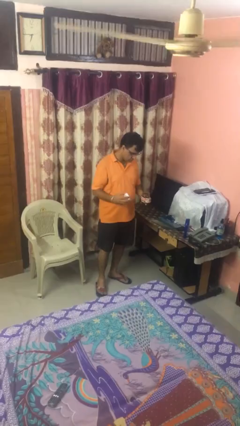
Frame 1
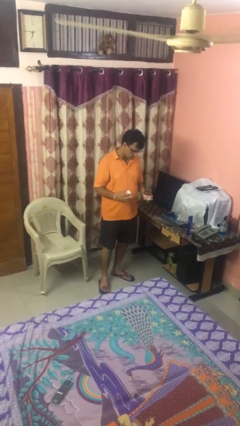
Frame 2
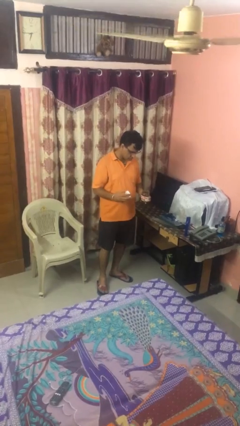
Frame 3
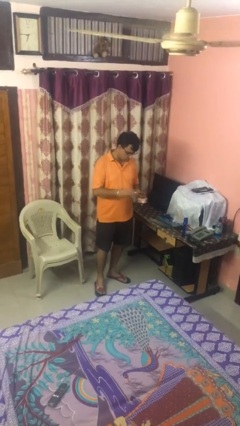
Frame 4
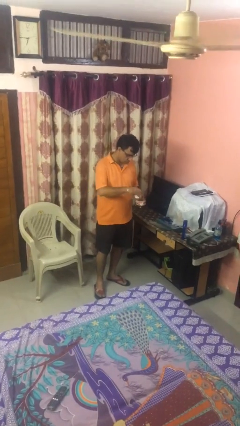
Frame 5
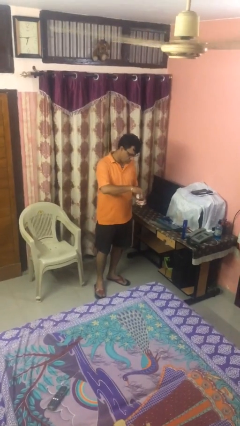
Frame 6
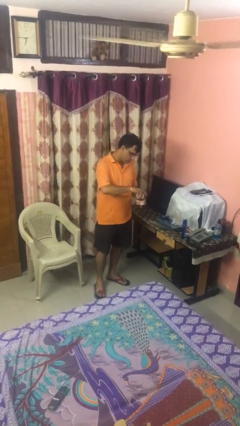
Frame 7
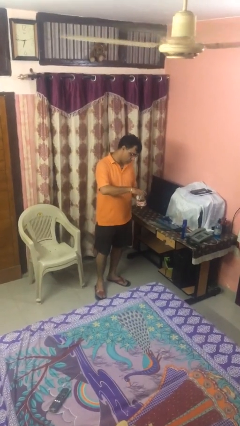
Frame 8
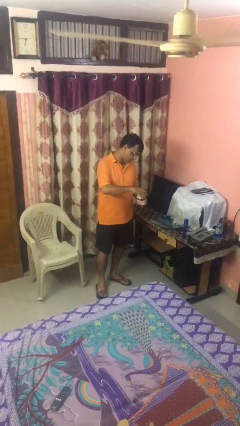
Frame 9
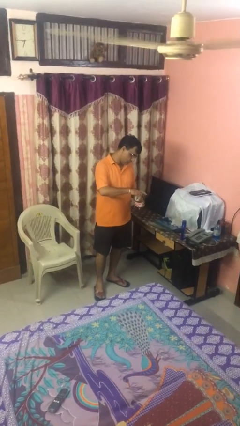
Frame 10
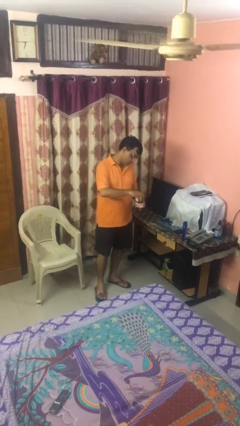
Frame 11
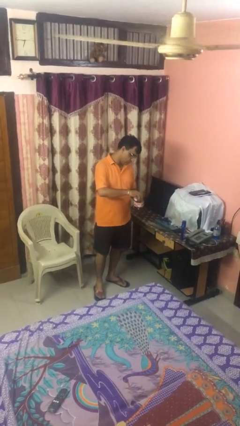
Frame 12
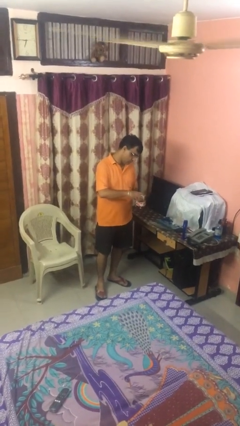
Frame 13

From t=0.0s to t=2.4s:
person closes jar

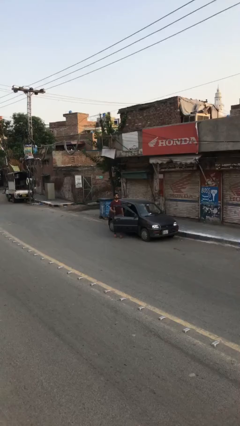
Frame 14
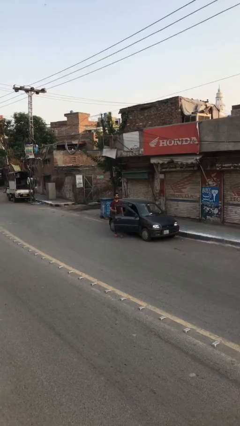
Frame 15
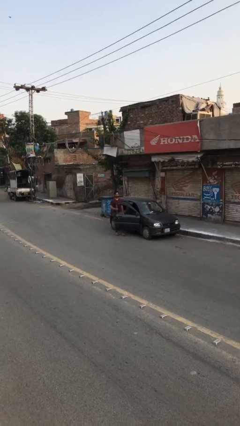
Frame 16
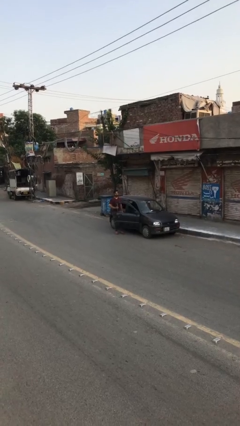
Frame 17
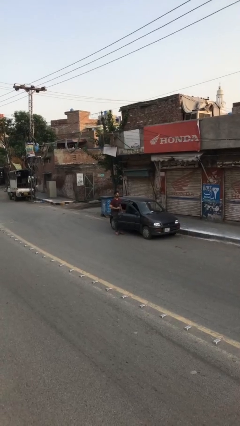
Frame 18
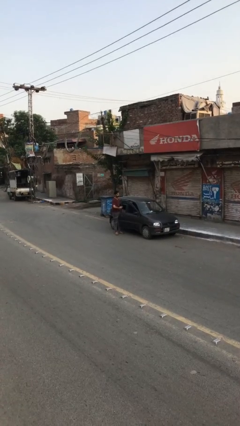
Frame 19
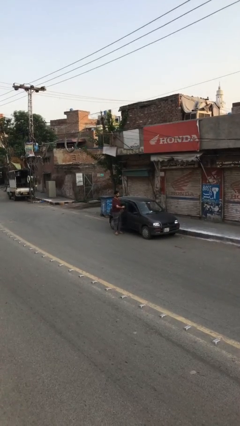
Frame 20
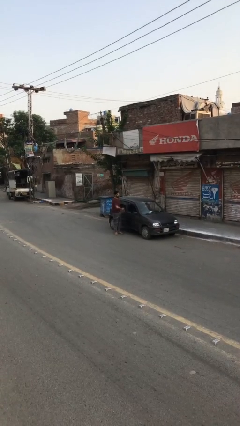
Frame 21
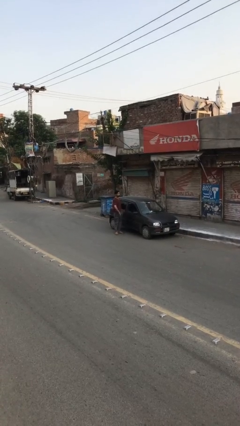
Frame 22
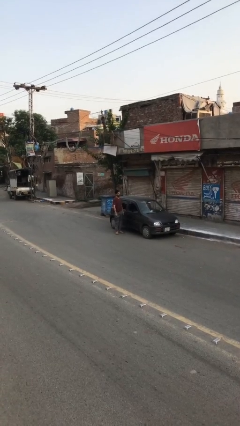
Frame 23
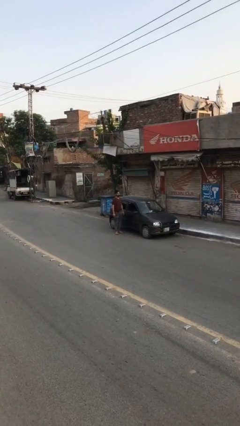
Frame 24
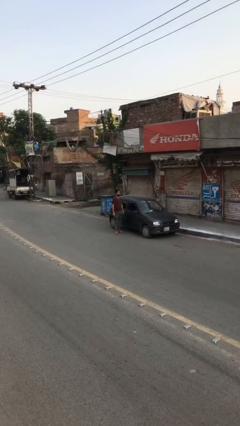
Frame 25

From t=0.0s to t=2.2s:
person closes car door

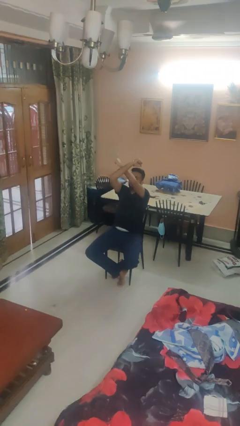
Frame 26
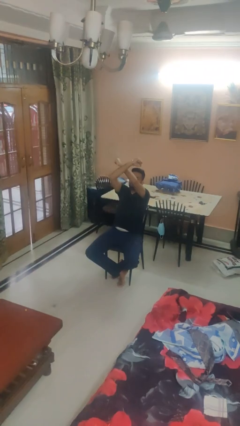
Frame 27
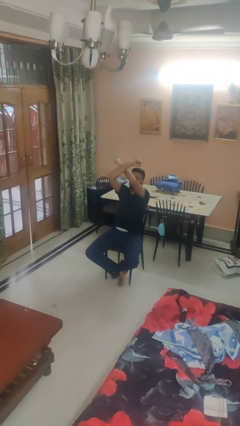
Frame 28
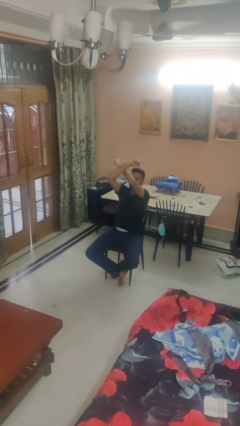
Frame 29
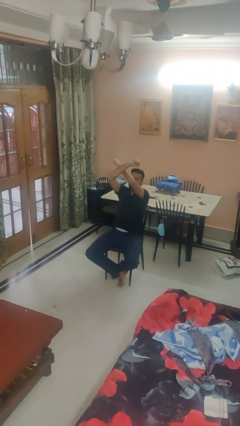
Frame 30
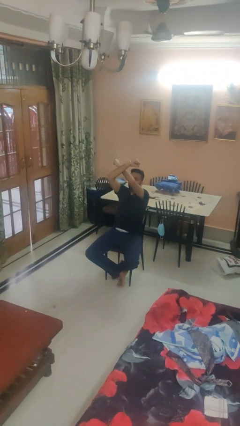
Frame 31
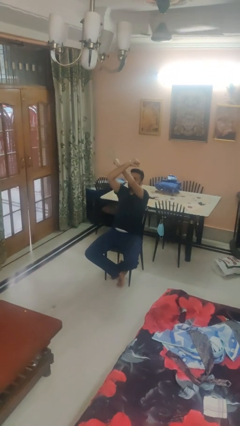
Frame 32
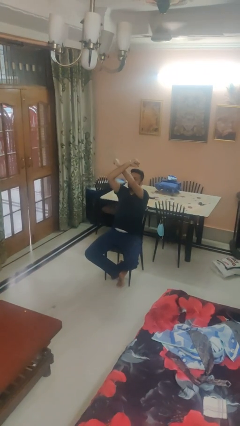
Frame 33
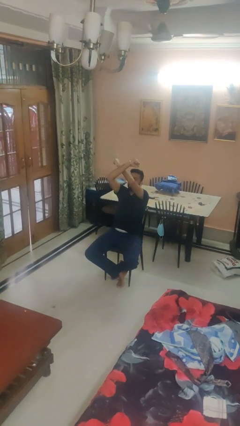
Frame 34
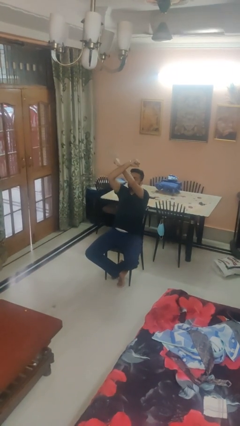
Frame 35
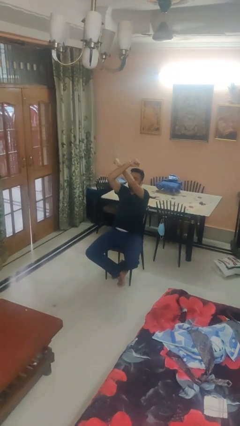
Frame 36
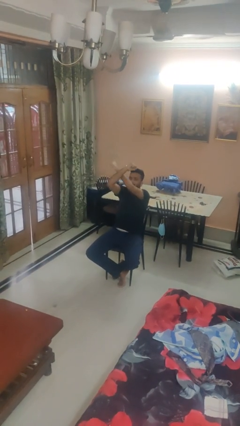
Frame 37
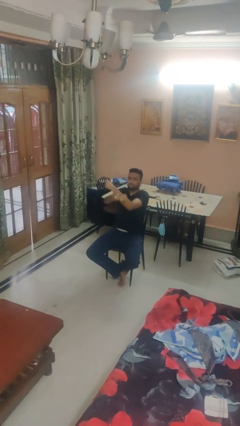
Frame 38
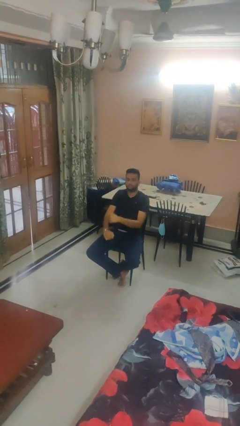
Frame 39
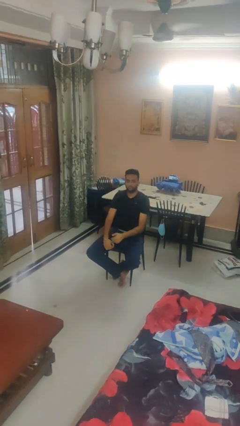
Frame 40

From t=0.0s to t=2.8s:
person gestures arms x

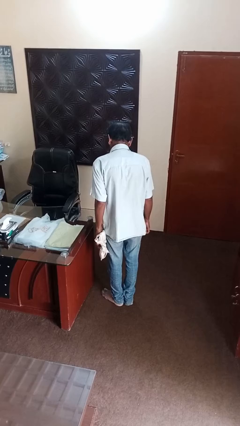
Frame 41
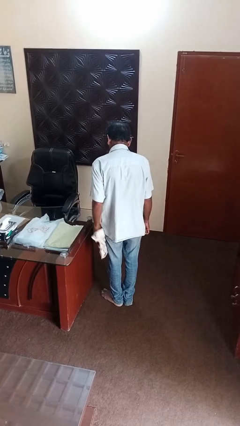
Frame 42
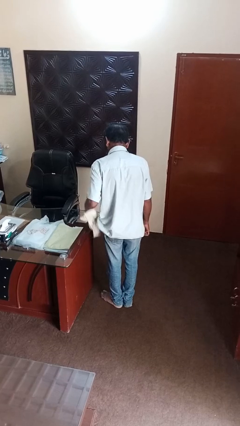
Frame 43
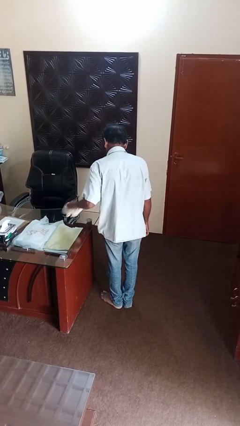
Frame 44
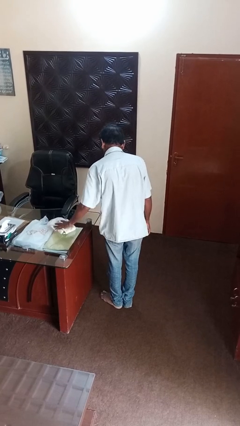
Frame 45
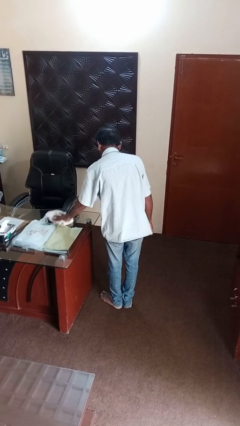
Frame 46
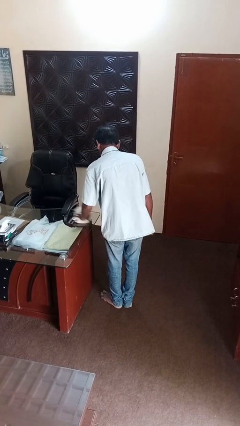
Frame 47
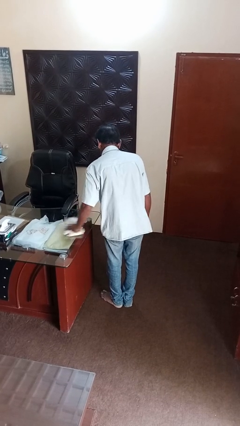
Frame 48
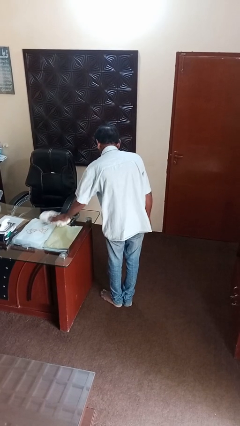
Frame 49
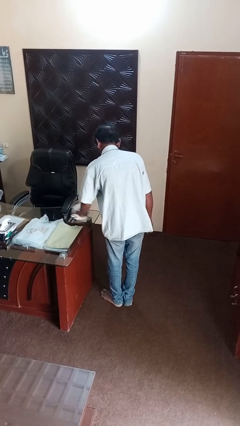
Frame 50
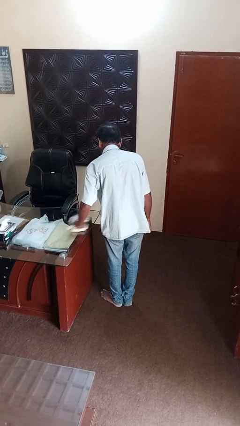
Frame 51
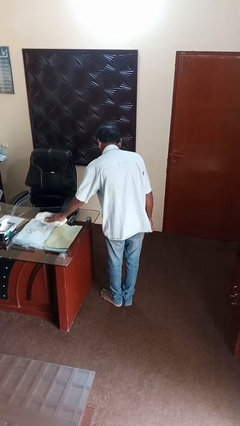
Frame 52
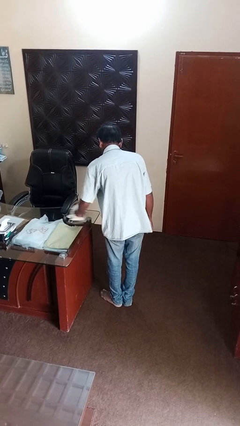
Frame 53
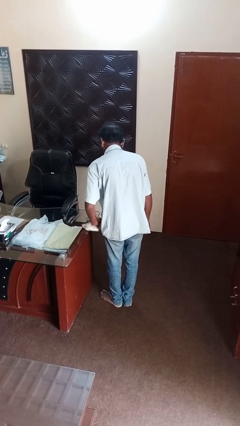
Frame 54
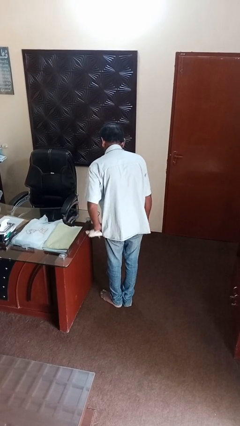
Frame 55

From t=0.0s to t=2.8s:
person cleans table with rag

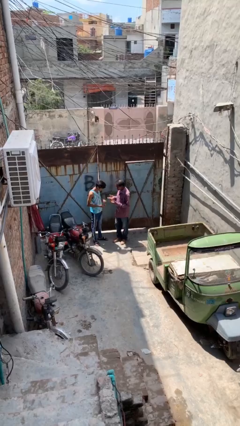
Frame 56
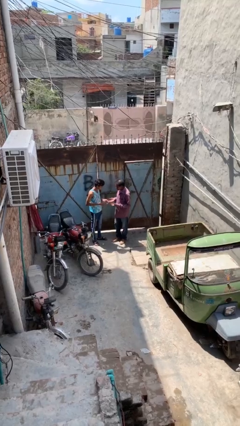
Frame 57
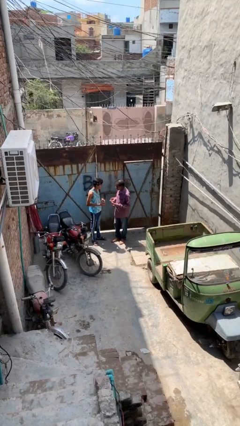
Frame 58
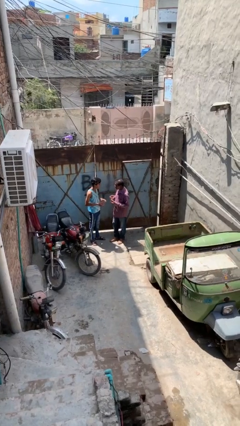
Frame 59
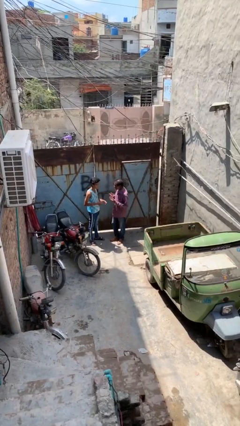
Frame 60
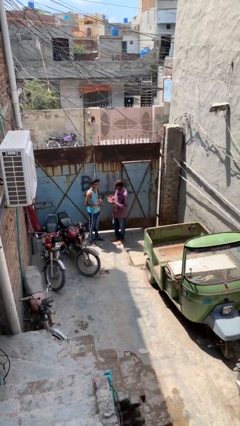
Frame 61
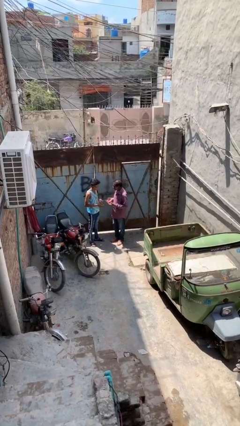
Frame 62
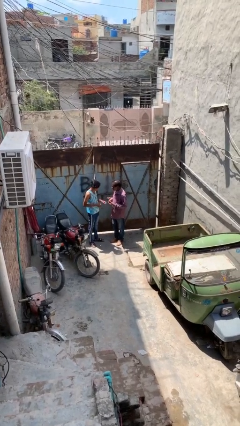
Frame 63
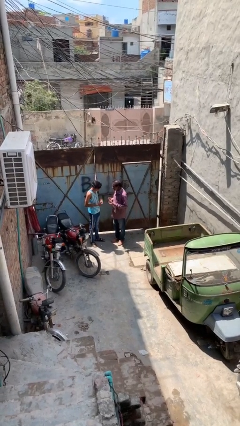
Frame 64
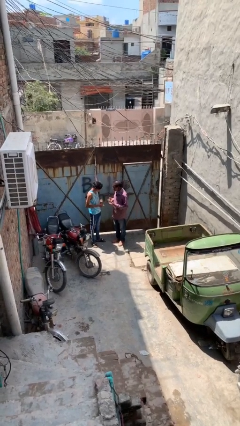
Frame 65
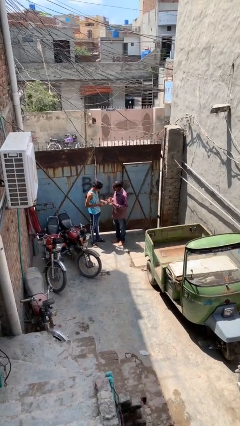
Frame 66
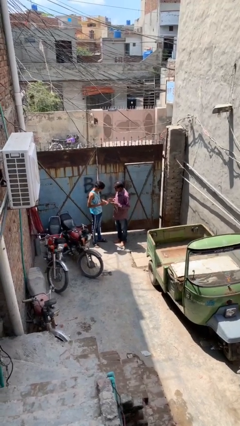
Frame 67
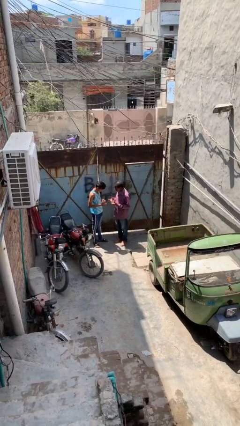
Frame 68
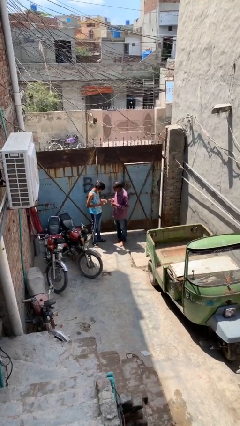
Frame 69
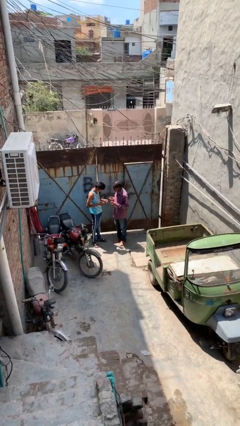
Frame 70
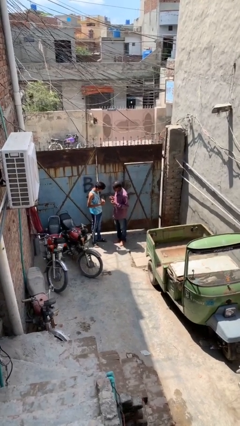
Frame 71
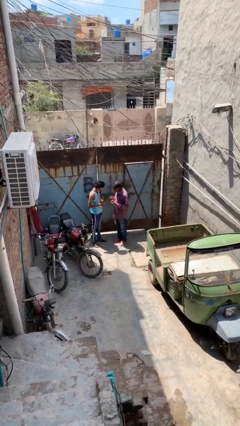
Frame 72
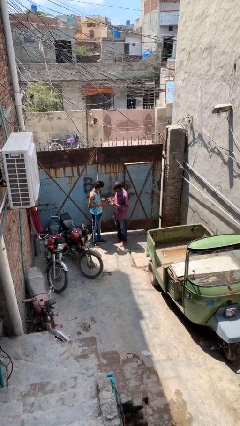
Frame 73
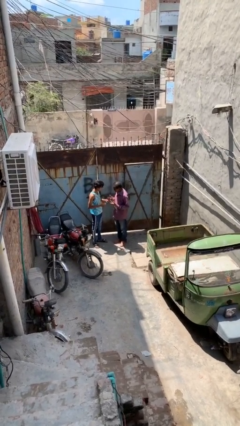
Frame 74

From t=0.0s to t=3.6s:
person talks to person

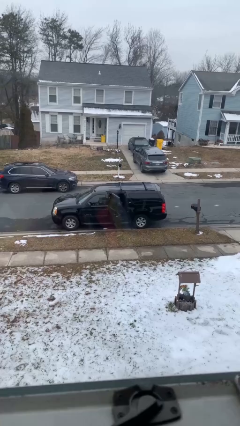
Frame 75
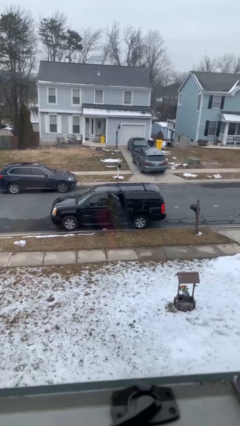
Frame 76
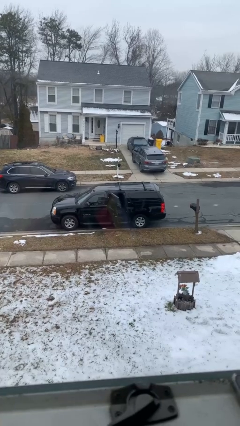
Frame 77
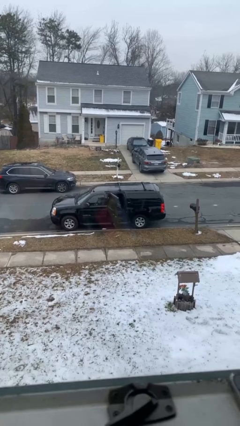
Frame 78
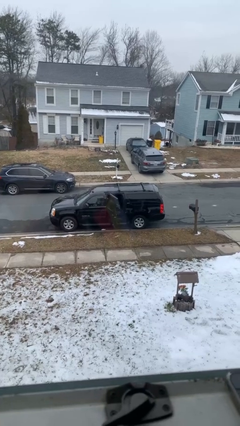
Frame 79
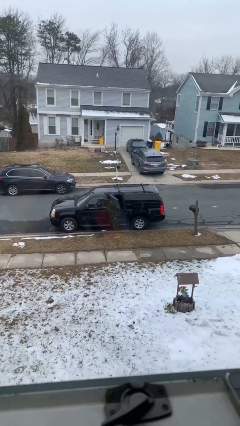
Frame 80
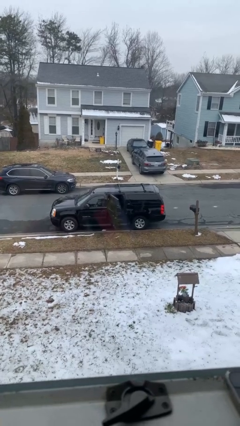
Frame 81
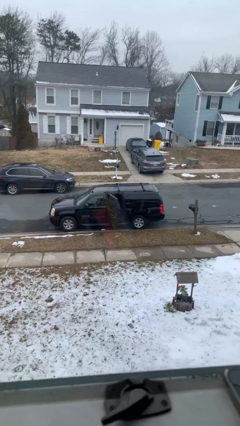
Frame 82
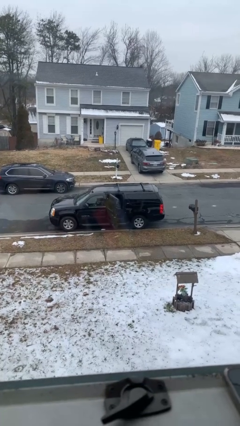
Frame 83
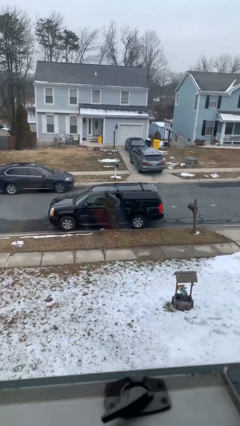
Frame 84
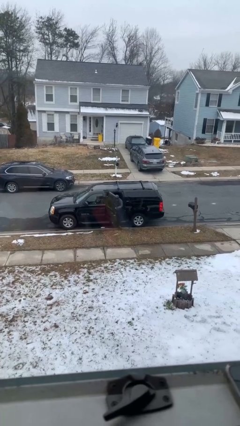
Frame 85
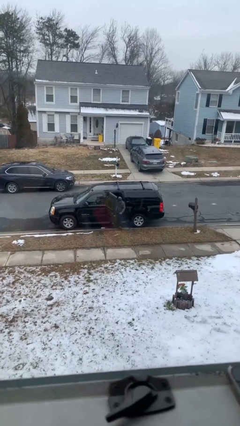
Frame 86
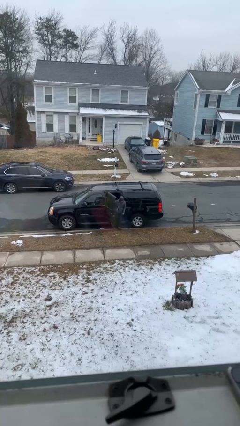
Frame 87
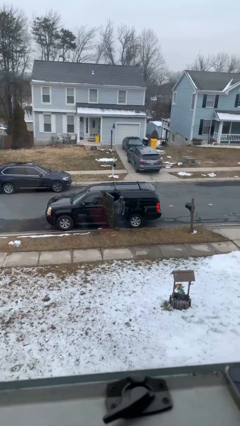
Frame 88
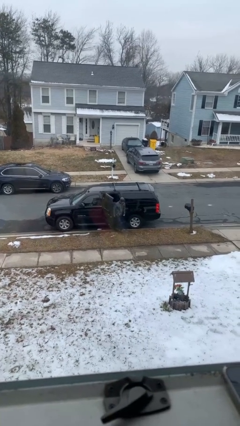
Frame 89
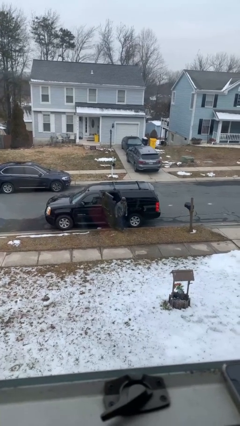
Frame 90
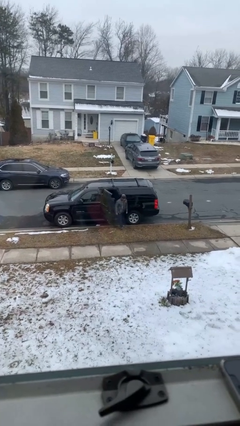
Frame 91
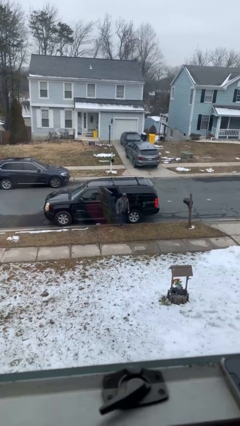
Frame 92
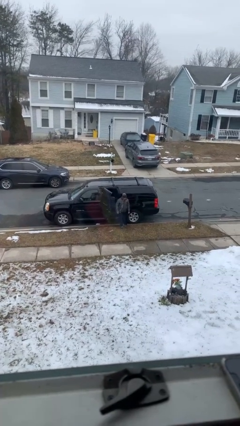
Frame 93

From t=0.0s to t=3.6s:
person exits car
